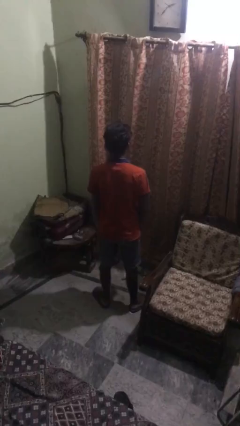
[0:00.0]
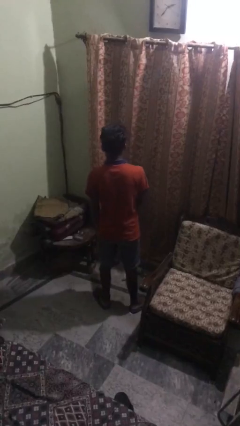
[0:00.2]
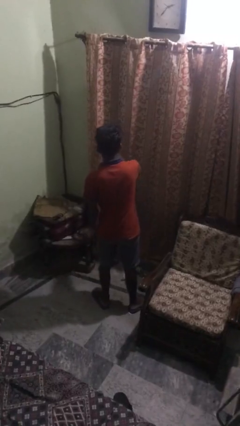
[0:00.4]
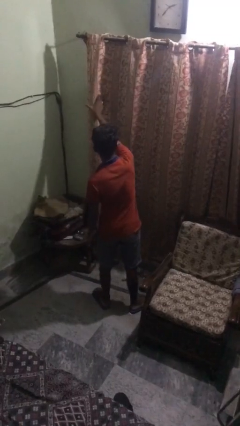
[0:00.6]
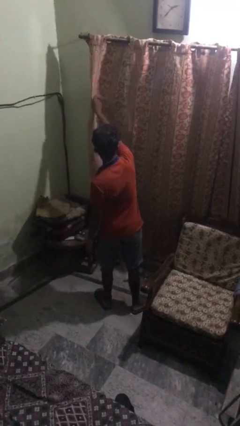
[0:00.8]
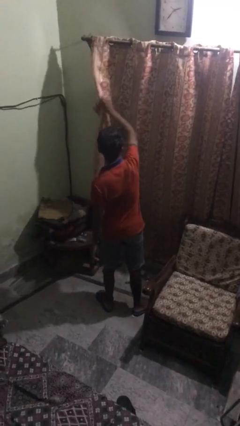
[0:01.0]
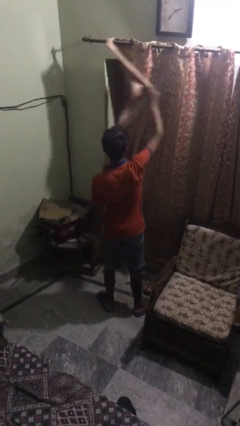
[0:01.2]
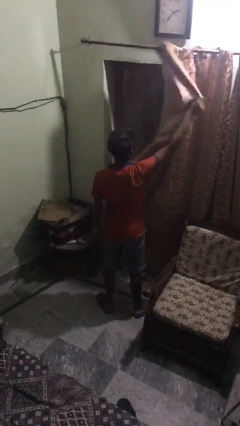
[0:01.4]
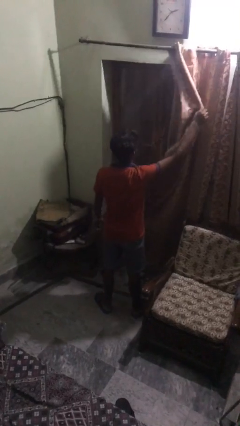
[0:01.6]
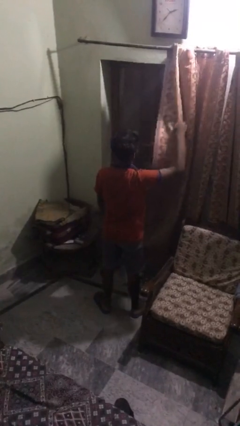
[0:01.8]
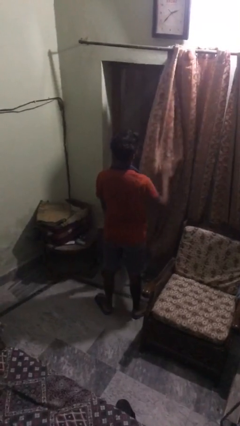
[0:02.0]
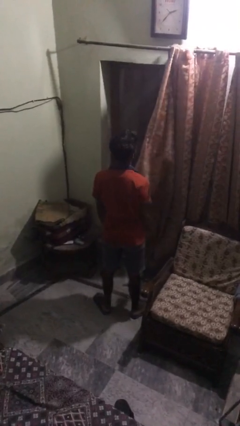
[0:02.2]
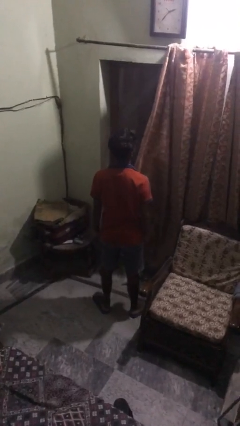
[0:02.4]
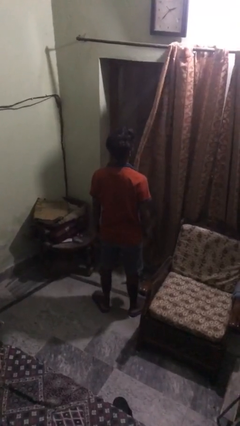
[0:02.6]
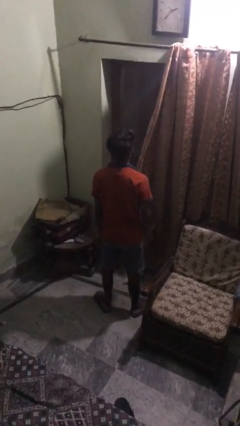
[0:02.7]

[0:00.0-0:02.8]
person opens curtains

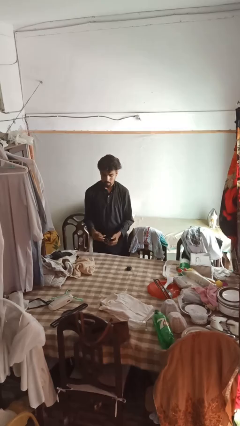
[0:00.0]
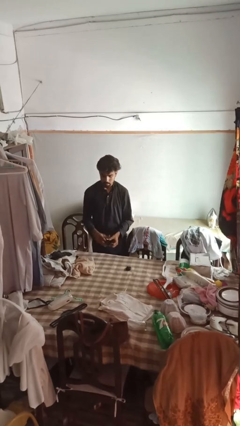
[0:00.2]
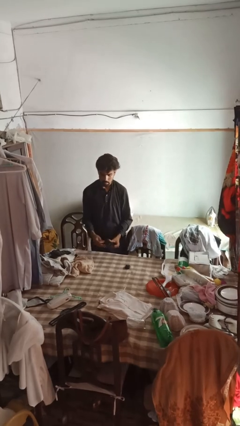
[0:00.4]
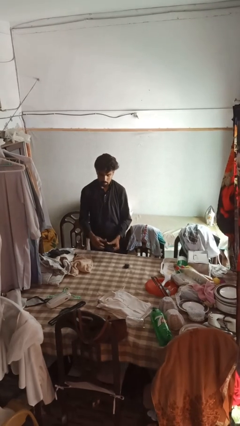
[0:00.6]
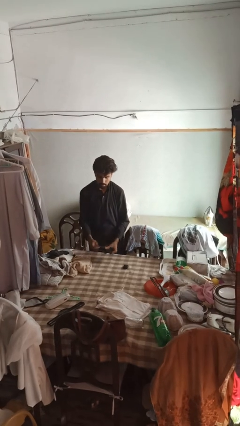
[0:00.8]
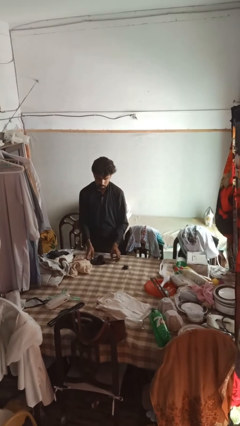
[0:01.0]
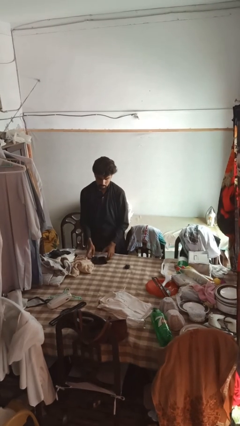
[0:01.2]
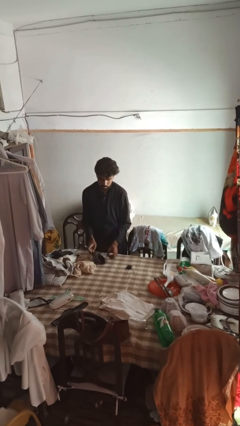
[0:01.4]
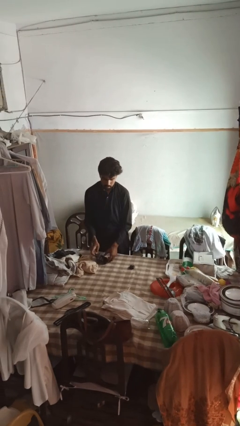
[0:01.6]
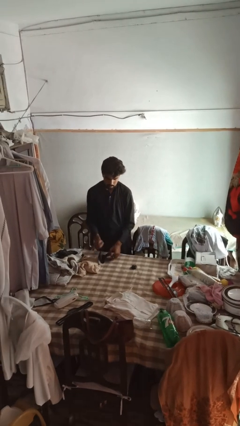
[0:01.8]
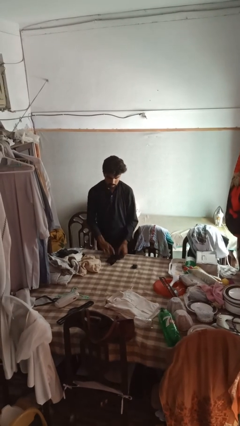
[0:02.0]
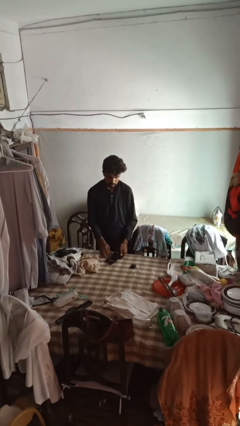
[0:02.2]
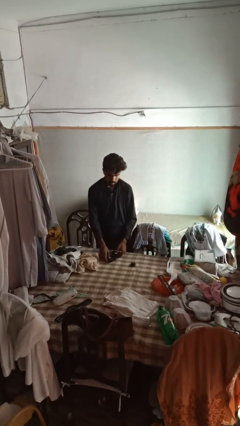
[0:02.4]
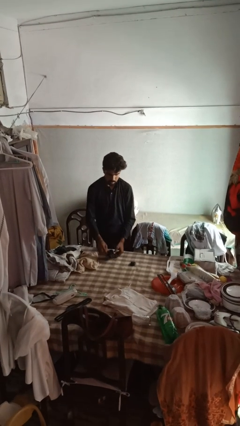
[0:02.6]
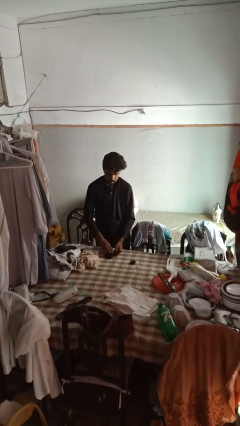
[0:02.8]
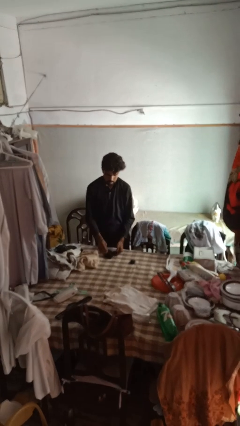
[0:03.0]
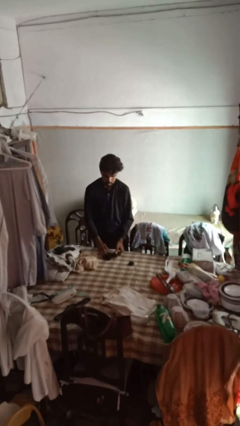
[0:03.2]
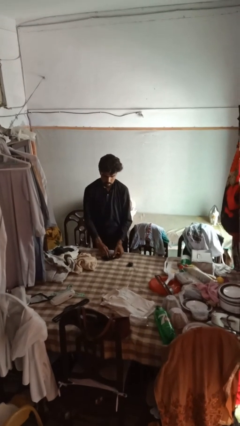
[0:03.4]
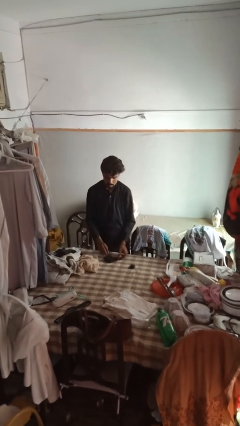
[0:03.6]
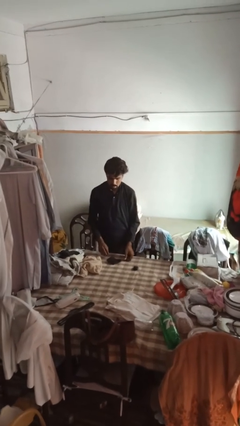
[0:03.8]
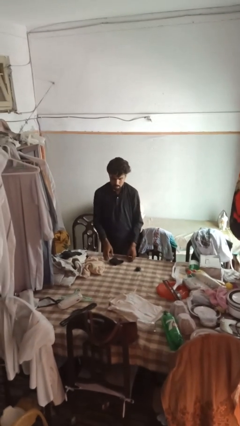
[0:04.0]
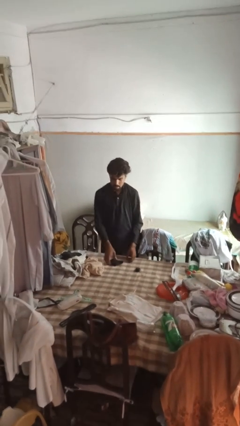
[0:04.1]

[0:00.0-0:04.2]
person folds socks

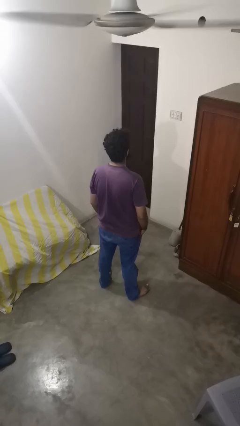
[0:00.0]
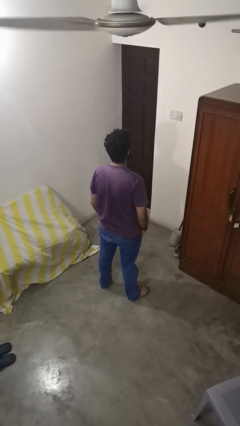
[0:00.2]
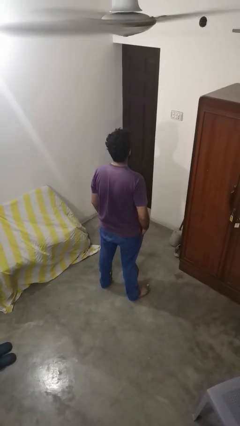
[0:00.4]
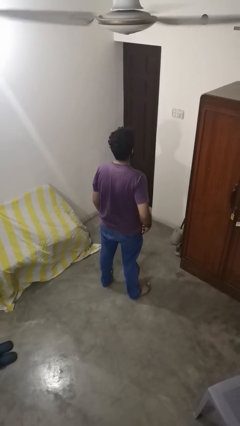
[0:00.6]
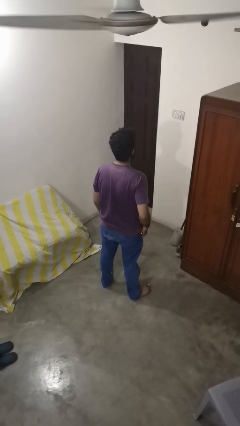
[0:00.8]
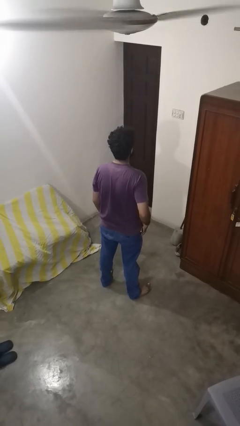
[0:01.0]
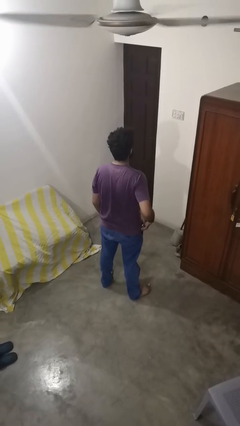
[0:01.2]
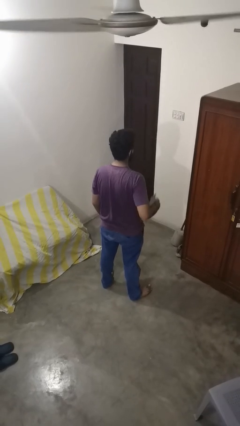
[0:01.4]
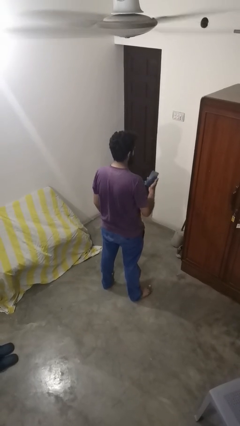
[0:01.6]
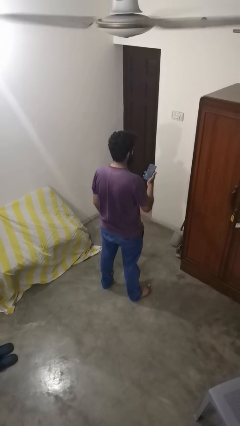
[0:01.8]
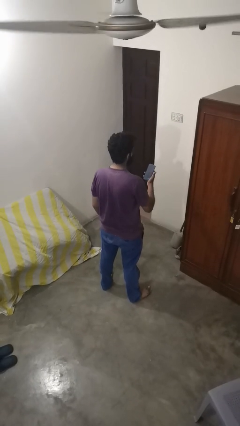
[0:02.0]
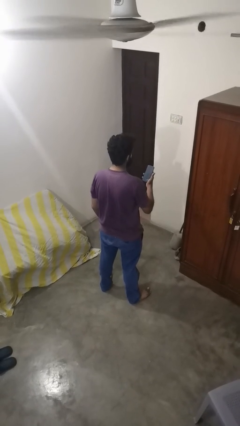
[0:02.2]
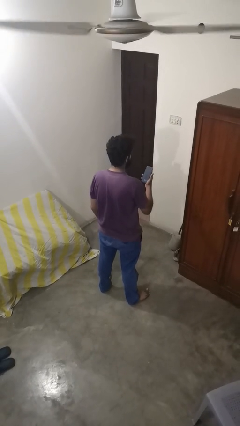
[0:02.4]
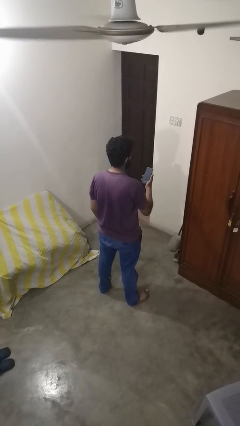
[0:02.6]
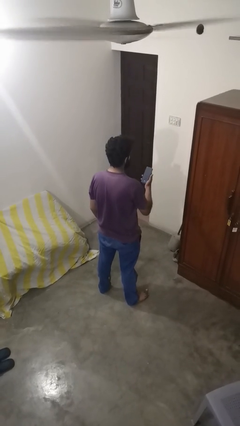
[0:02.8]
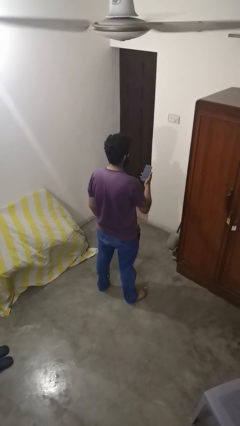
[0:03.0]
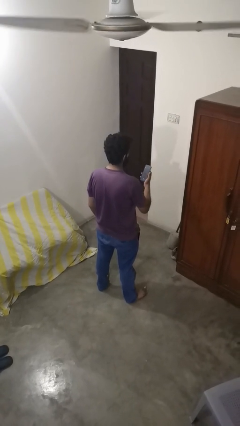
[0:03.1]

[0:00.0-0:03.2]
person takes phone from pocket

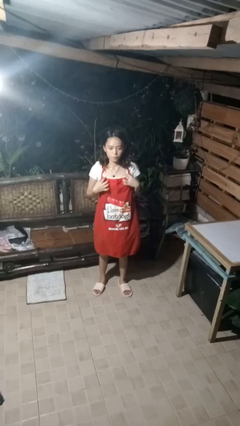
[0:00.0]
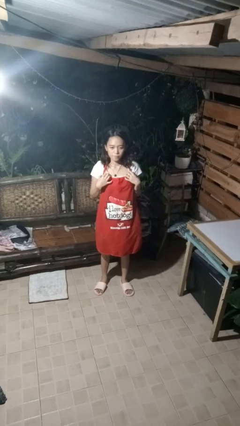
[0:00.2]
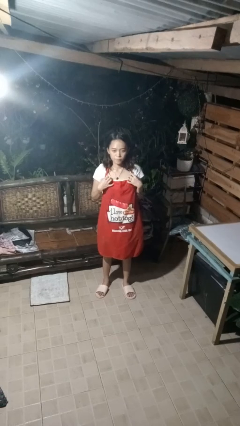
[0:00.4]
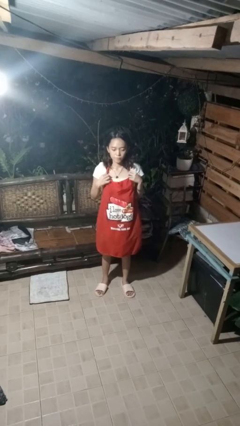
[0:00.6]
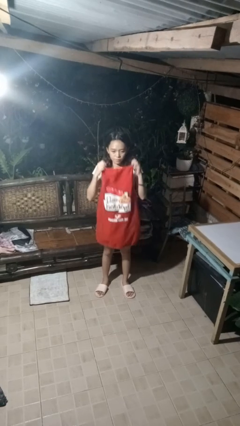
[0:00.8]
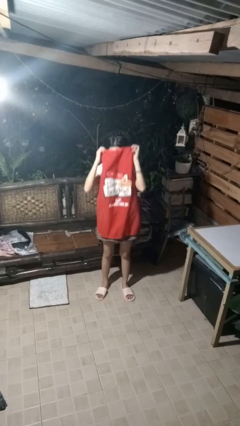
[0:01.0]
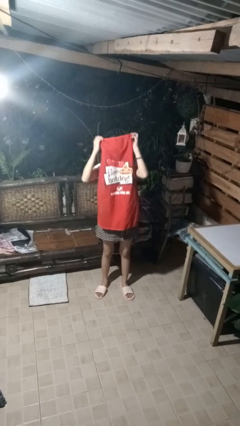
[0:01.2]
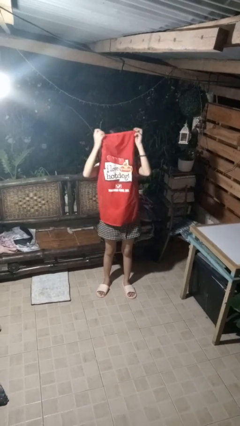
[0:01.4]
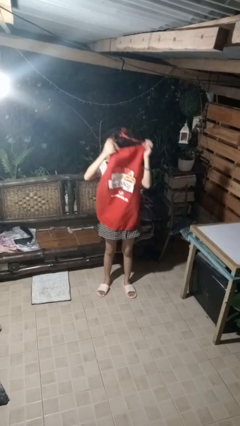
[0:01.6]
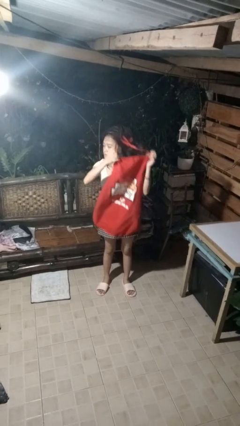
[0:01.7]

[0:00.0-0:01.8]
person takes off apron

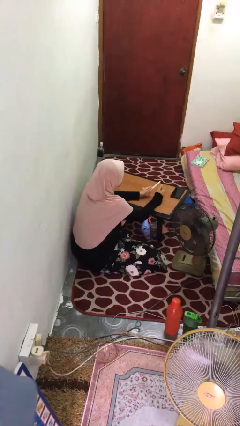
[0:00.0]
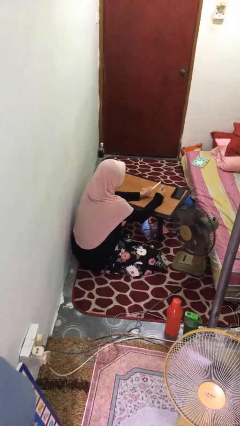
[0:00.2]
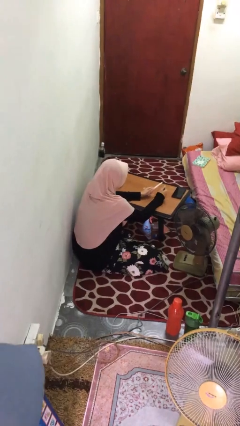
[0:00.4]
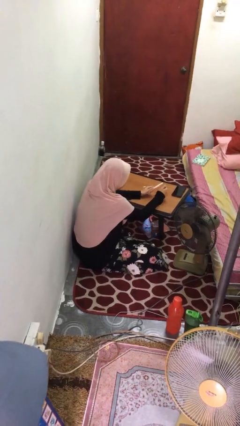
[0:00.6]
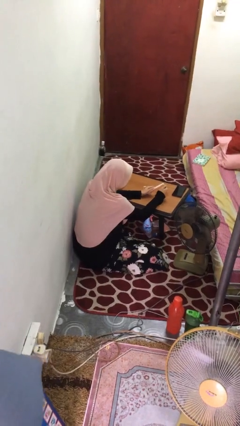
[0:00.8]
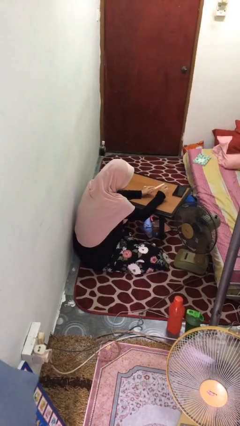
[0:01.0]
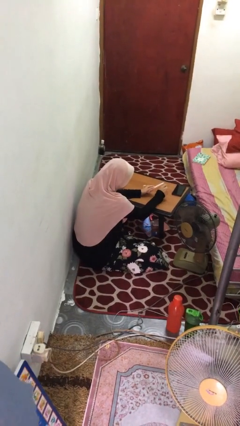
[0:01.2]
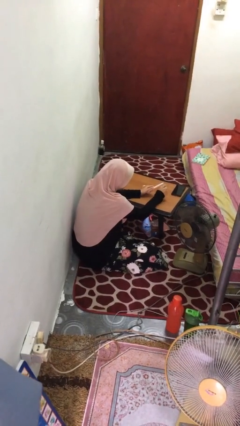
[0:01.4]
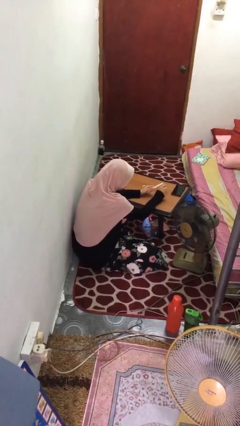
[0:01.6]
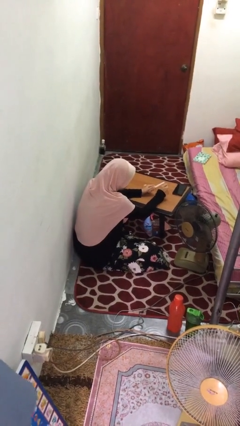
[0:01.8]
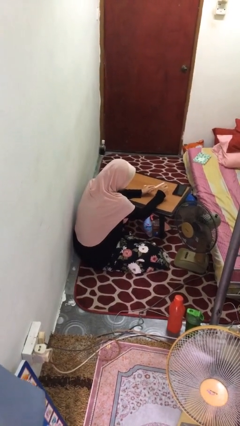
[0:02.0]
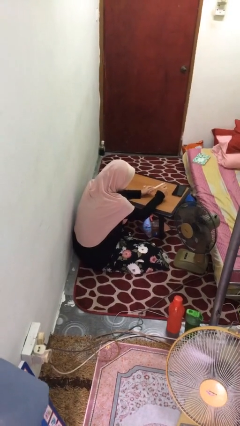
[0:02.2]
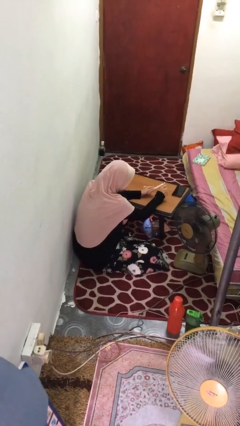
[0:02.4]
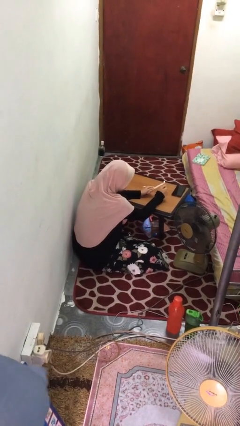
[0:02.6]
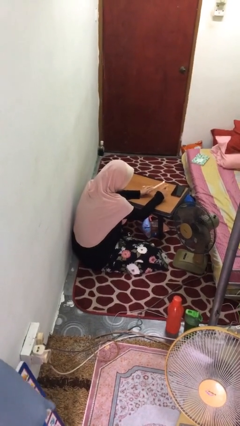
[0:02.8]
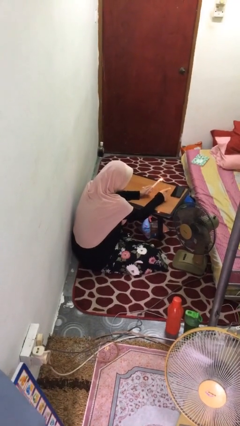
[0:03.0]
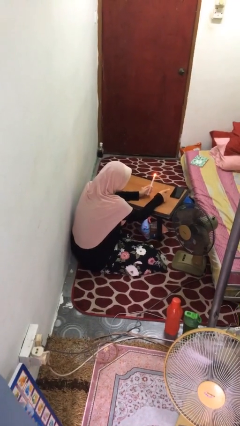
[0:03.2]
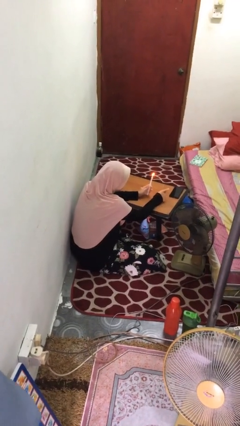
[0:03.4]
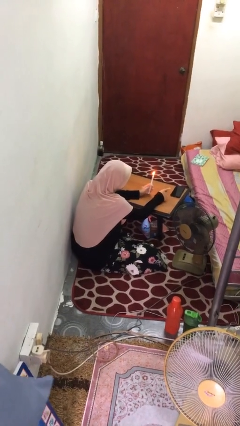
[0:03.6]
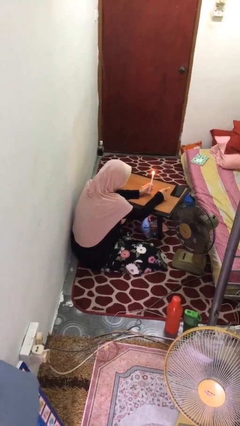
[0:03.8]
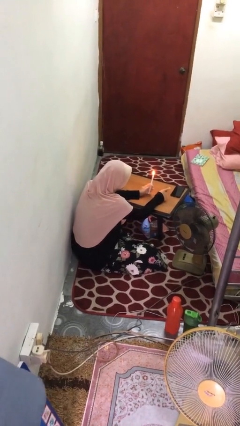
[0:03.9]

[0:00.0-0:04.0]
person lights candle

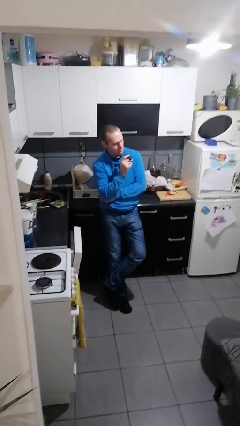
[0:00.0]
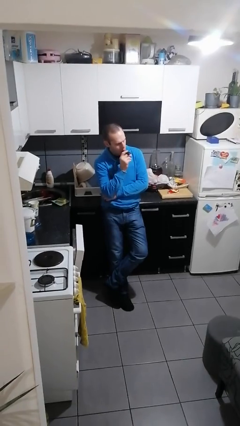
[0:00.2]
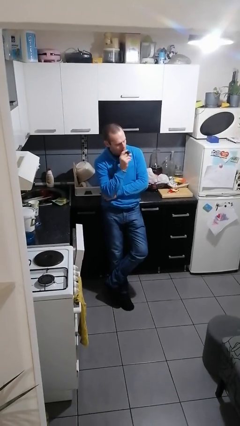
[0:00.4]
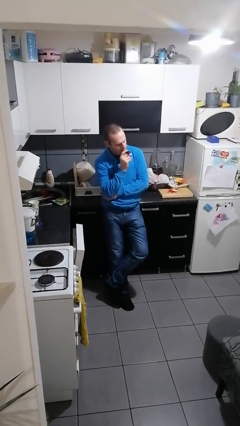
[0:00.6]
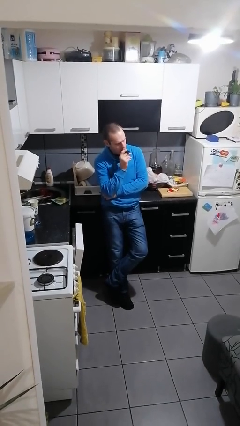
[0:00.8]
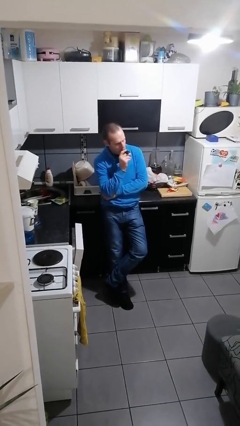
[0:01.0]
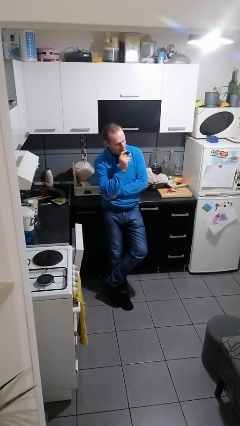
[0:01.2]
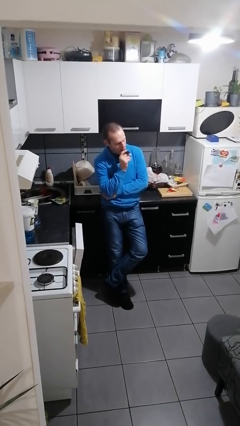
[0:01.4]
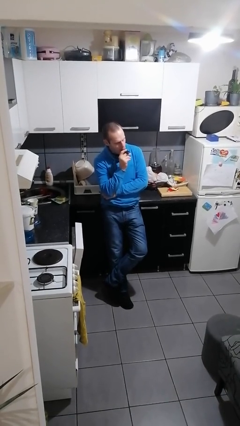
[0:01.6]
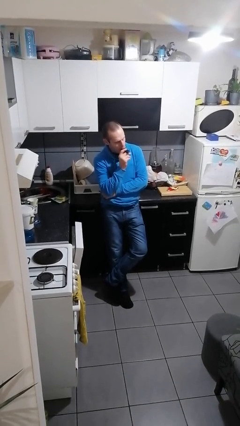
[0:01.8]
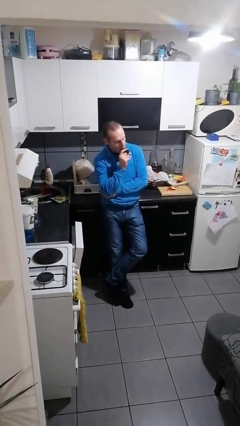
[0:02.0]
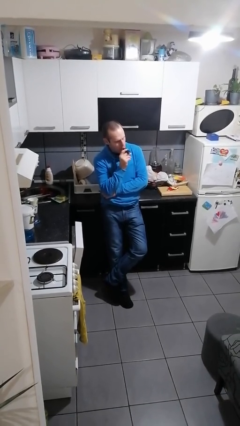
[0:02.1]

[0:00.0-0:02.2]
person vapes
